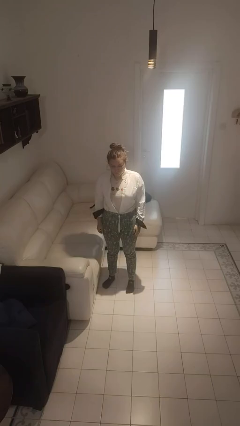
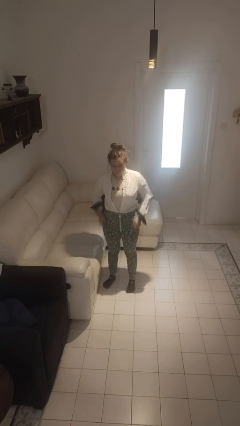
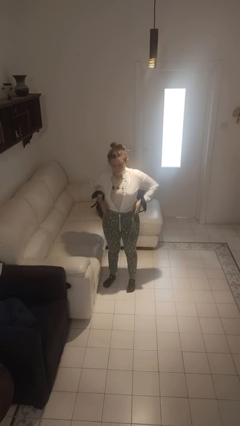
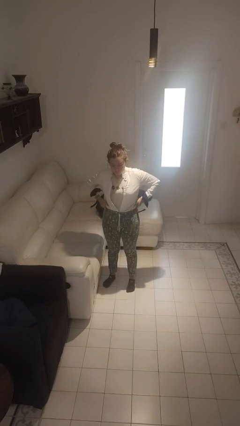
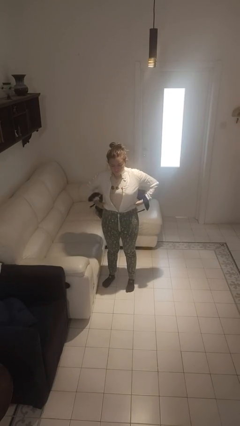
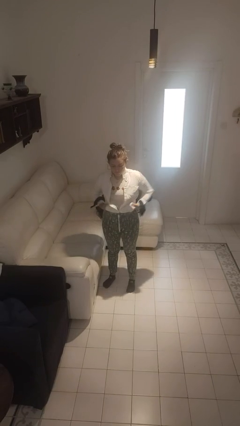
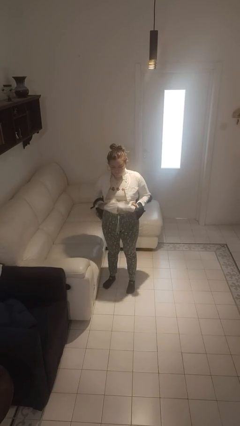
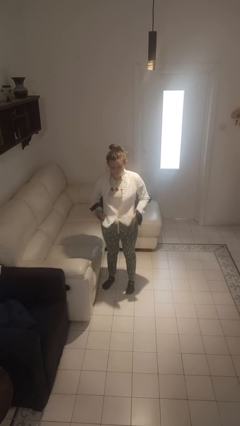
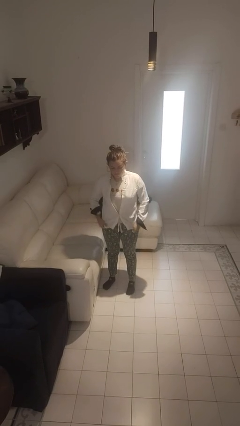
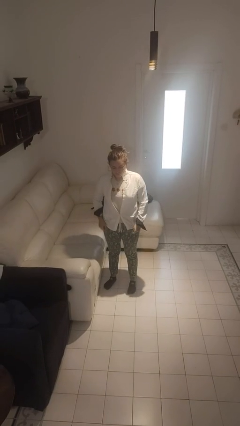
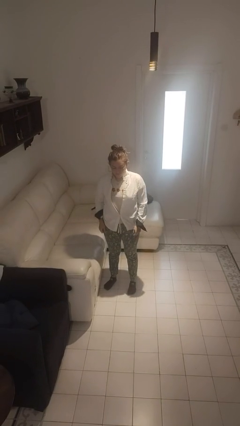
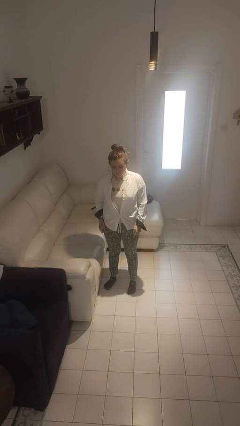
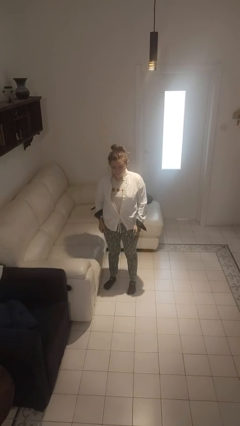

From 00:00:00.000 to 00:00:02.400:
person untucks shirt

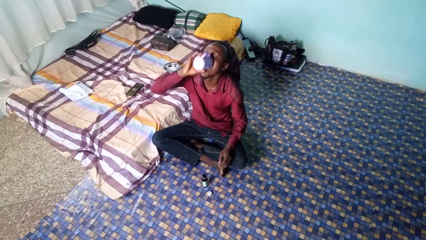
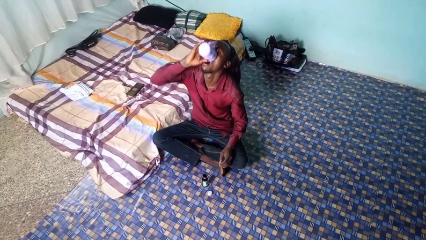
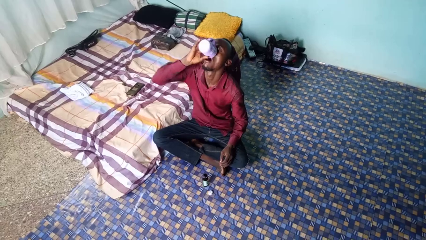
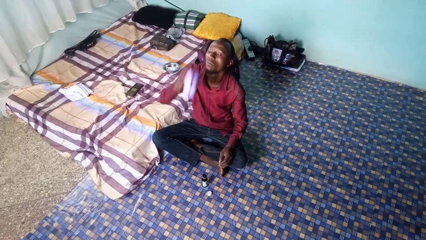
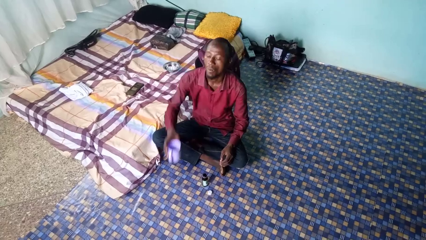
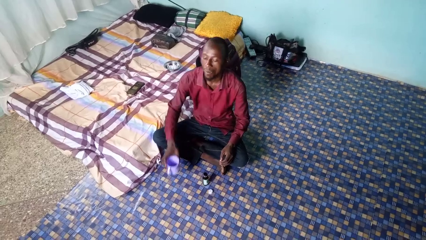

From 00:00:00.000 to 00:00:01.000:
person drinks from cup

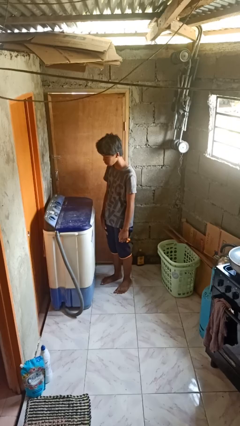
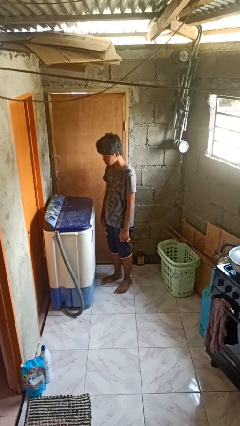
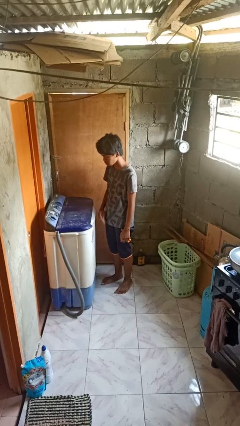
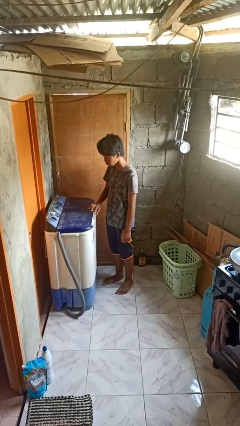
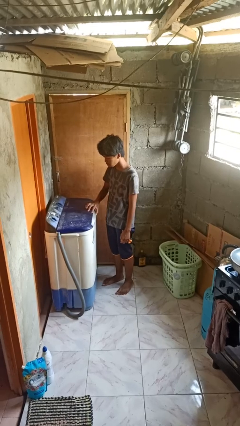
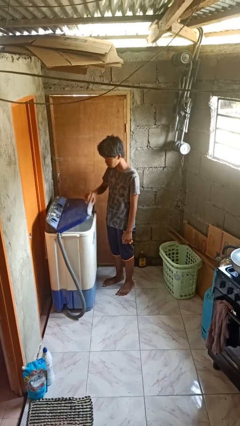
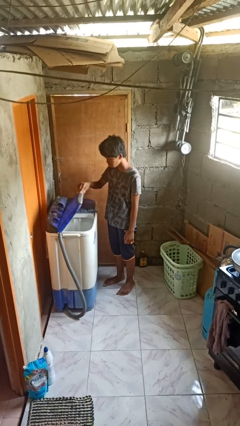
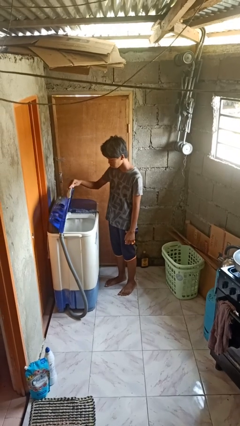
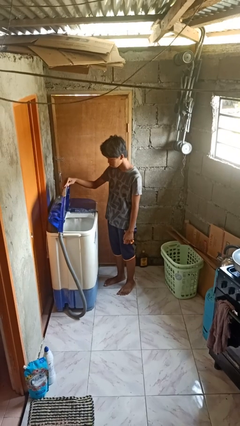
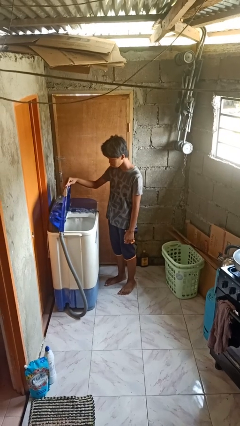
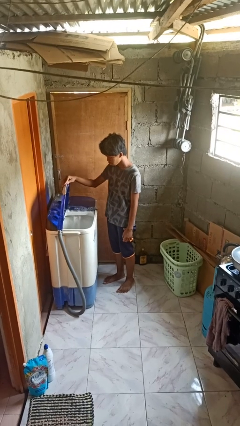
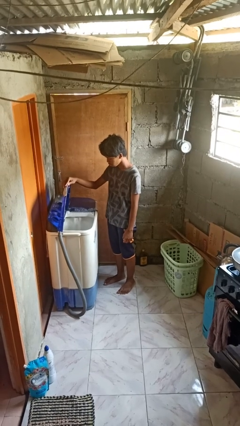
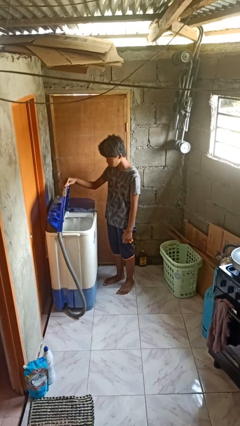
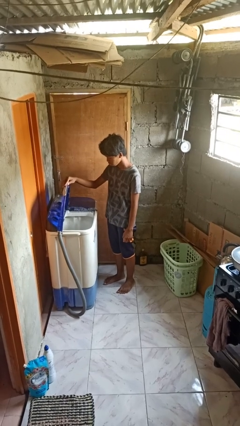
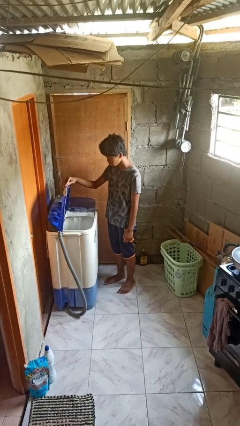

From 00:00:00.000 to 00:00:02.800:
person opens clothes washer

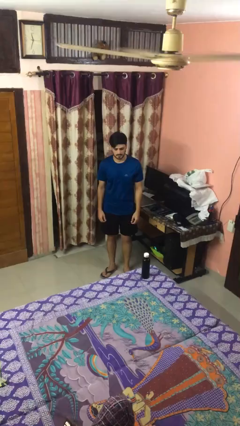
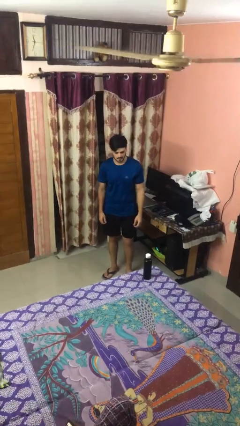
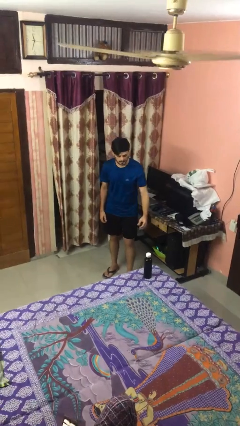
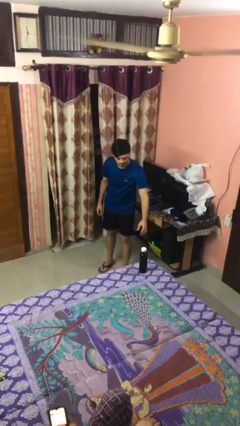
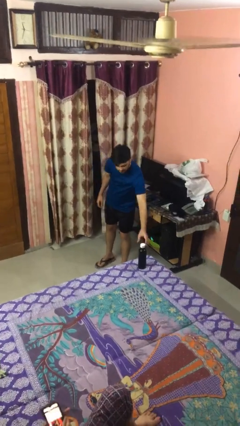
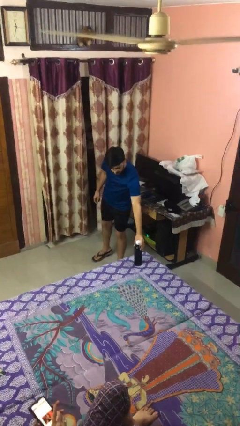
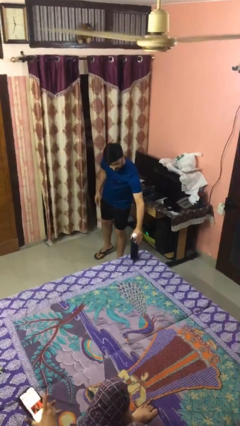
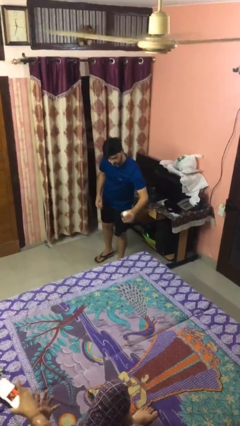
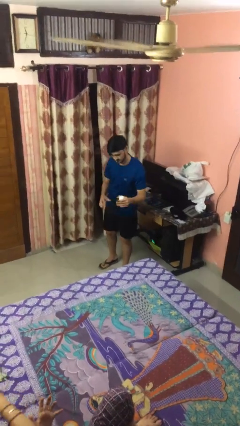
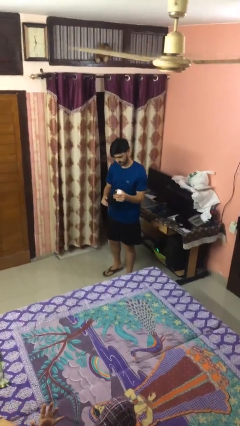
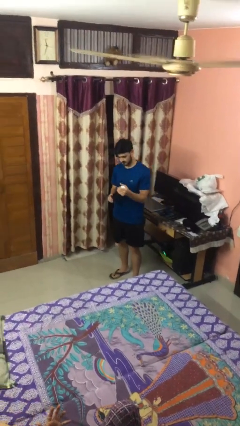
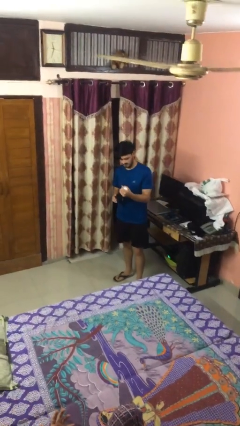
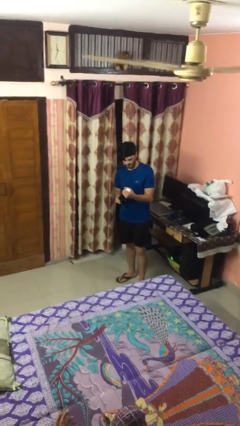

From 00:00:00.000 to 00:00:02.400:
person picks up object from bed

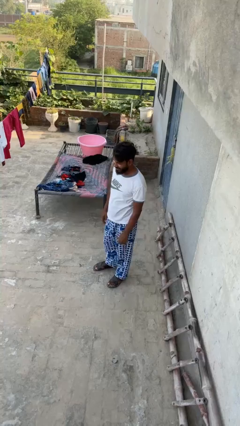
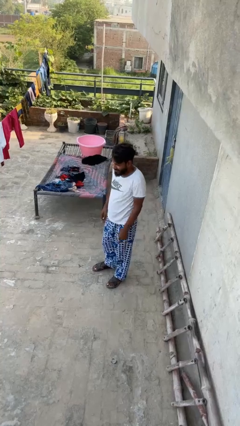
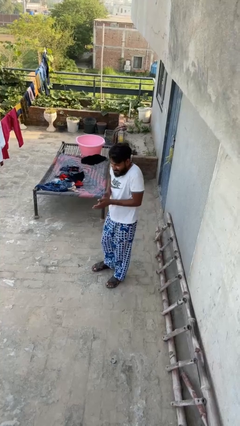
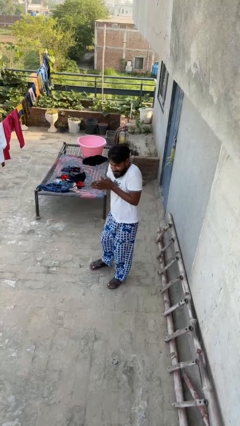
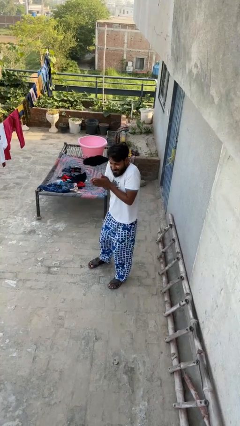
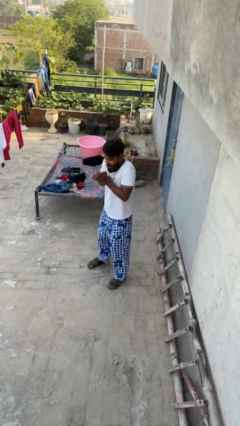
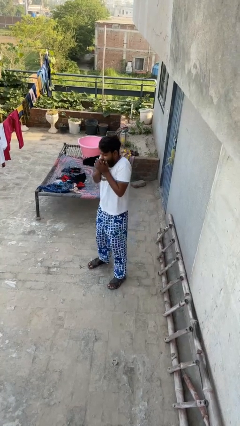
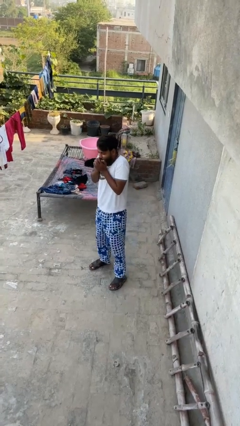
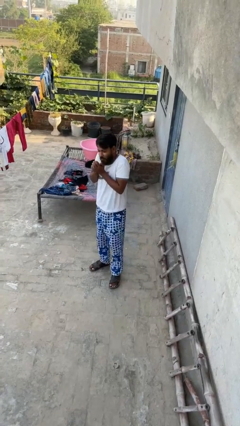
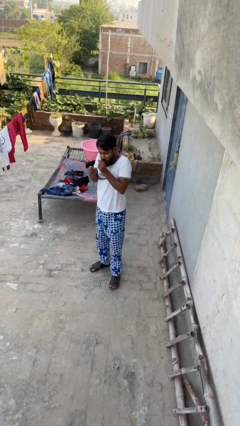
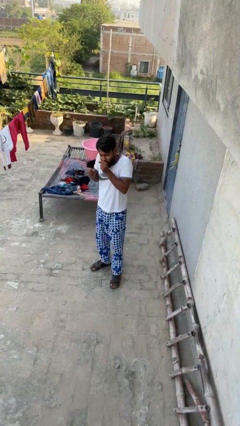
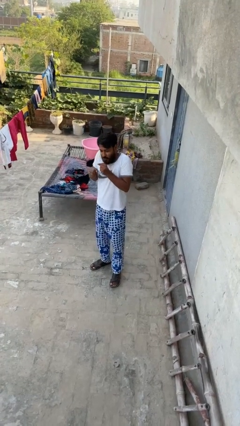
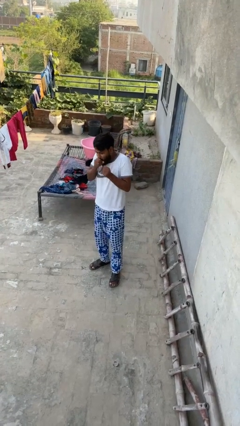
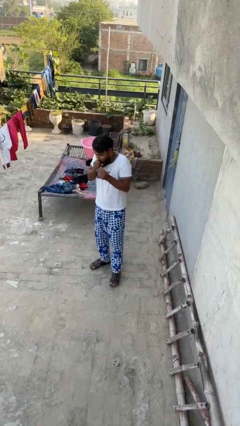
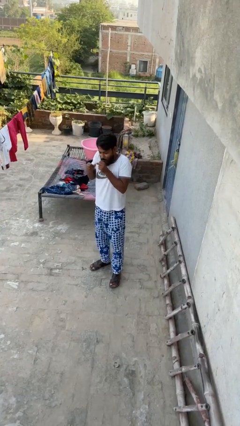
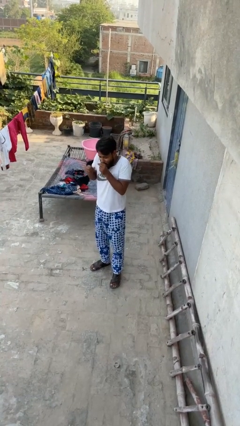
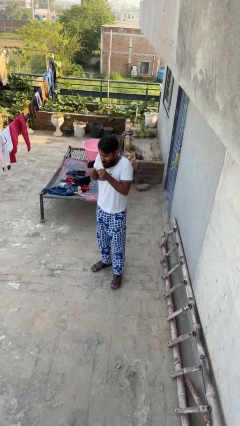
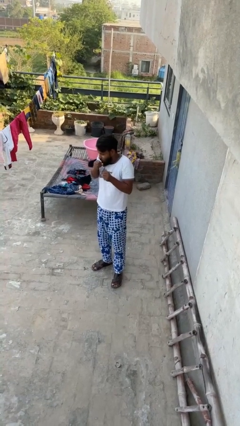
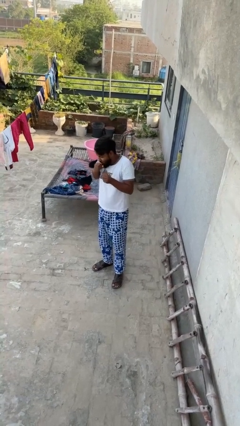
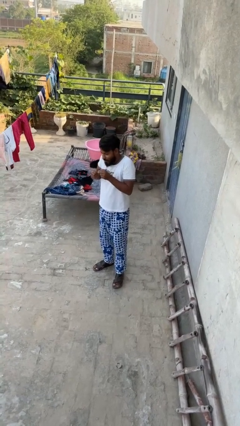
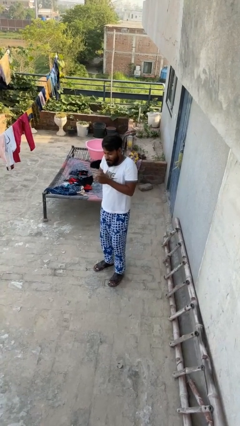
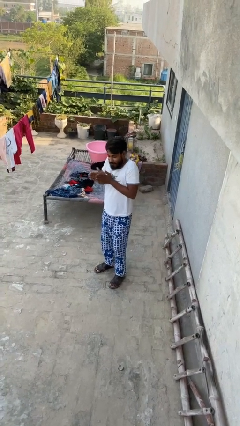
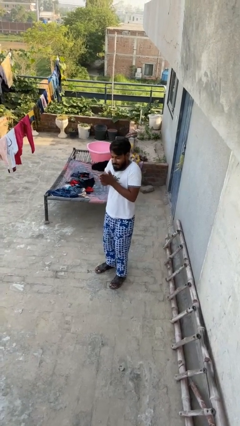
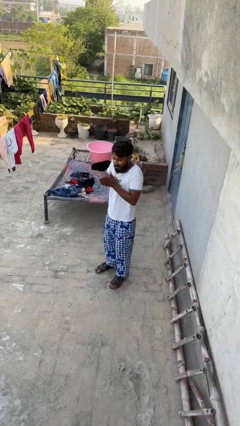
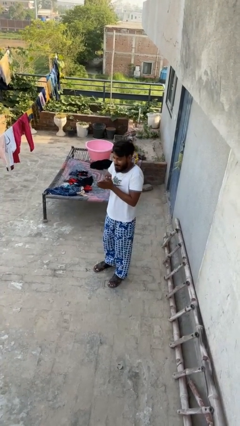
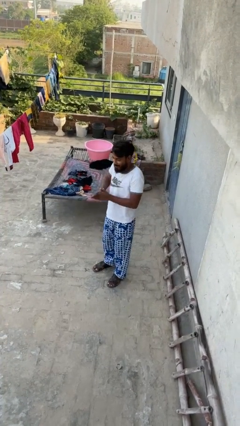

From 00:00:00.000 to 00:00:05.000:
person blows into hands

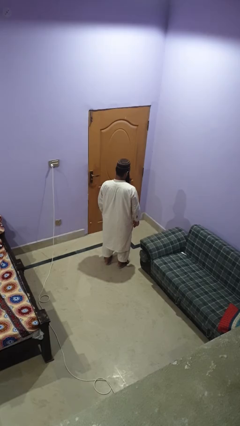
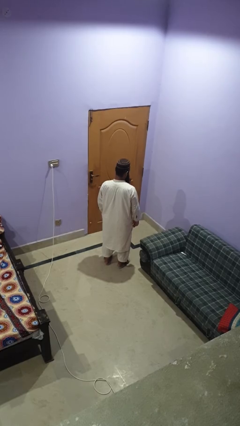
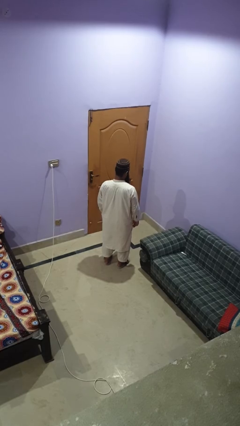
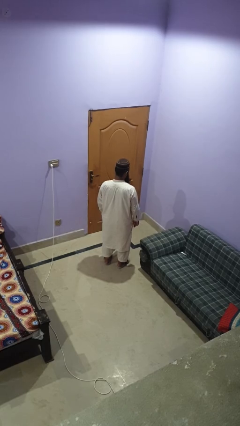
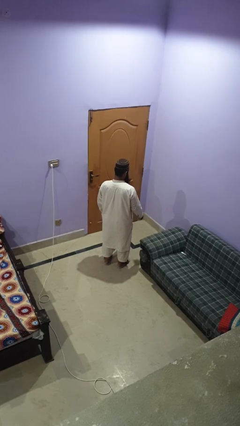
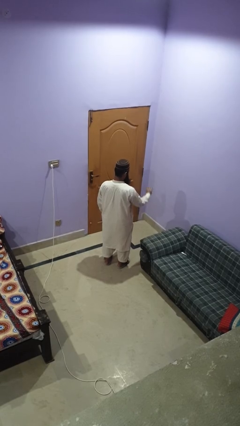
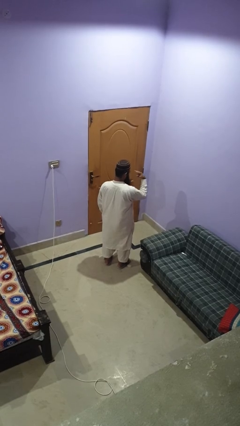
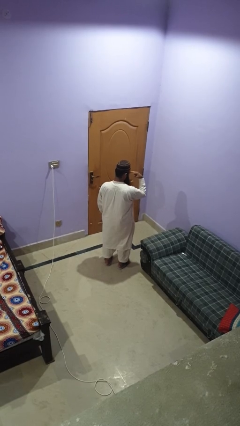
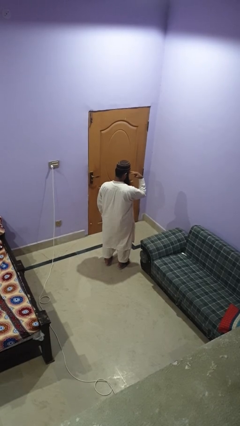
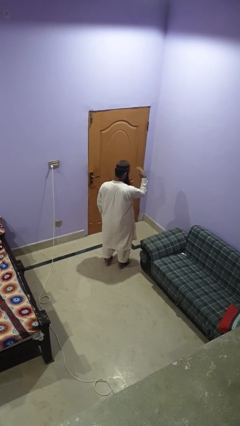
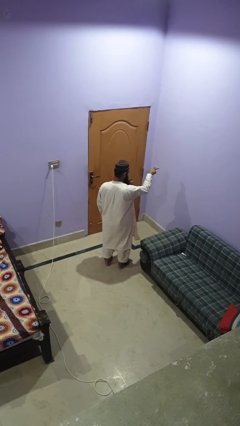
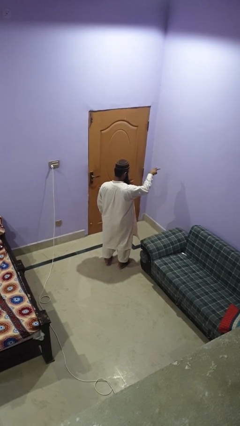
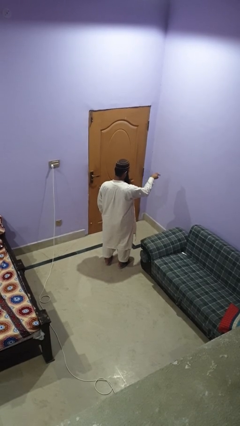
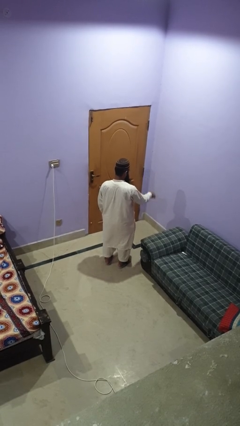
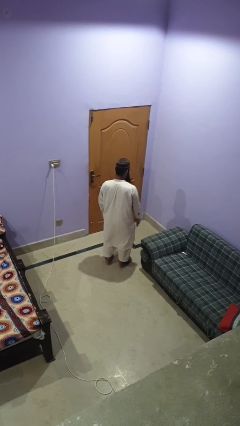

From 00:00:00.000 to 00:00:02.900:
person gestures watch closely

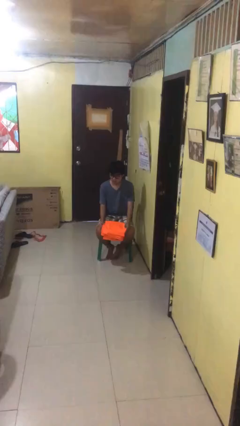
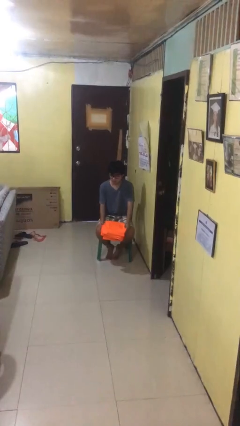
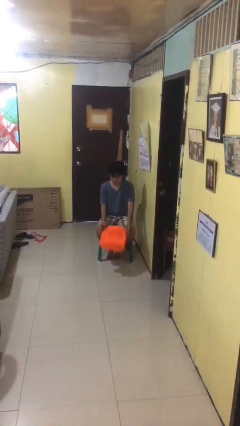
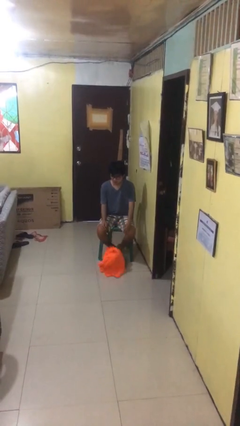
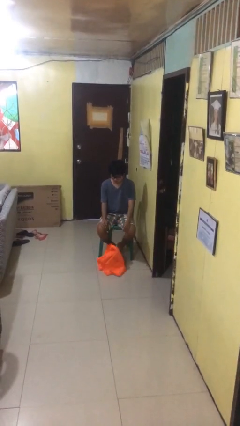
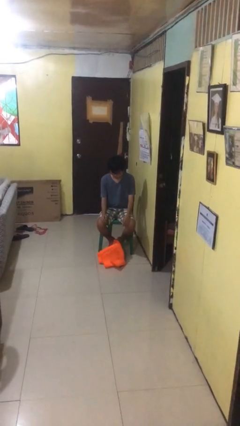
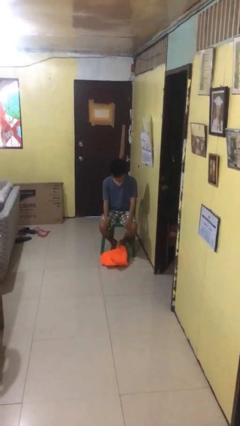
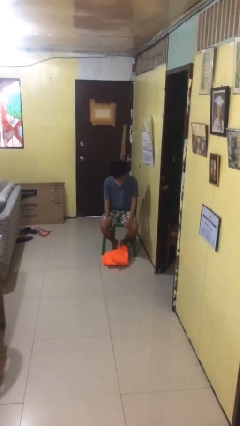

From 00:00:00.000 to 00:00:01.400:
person drops object
